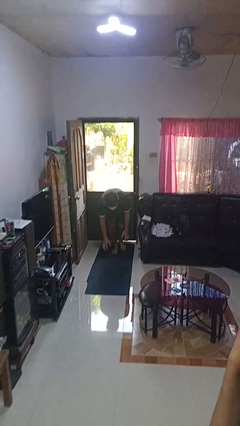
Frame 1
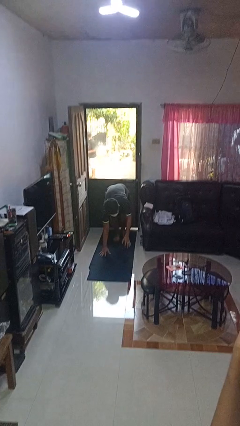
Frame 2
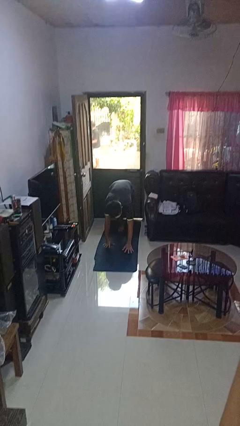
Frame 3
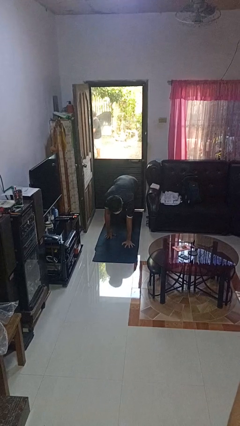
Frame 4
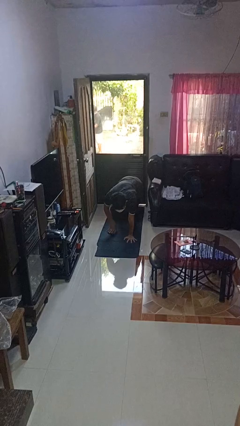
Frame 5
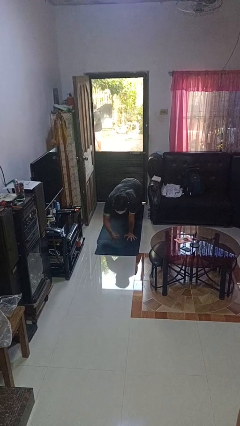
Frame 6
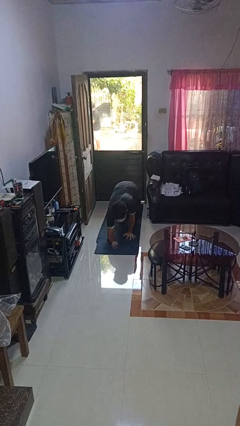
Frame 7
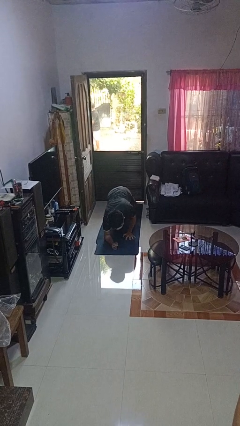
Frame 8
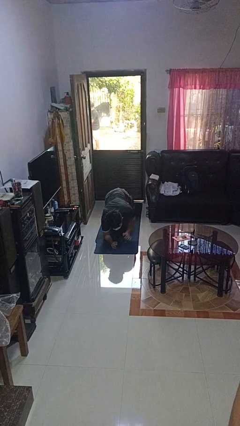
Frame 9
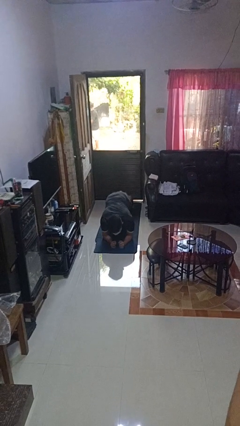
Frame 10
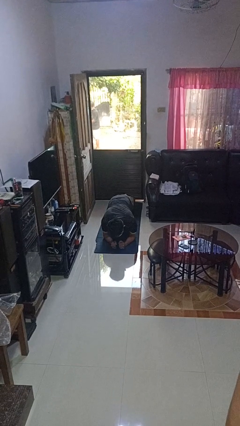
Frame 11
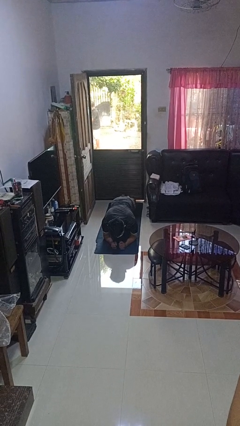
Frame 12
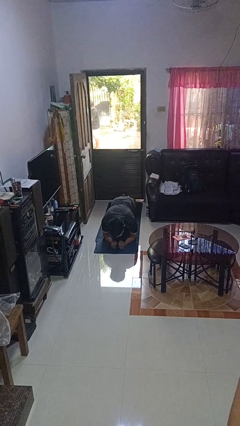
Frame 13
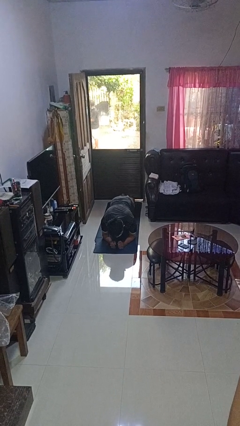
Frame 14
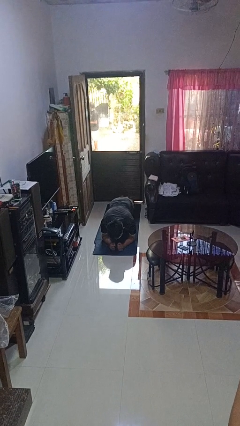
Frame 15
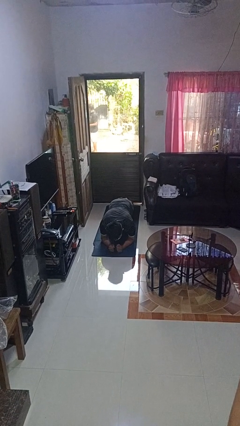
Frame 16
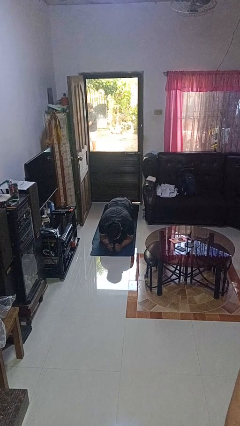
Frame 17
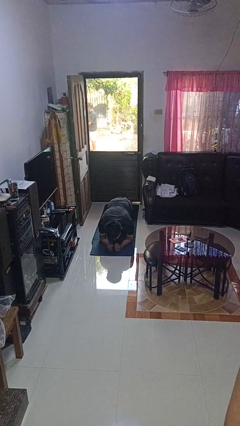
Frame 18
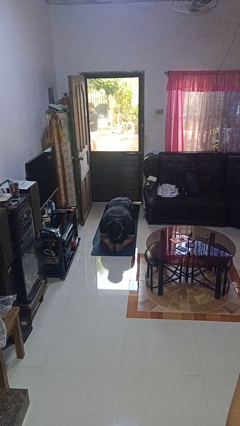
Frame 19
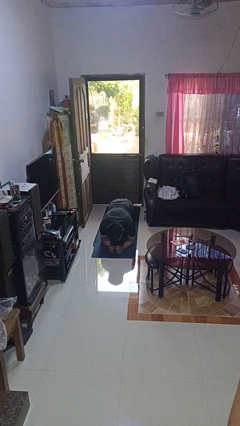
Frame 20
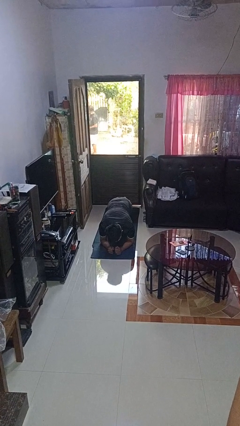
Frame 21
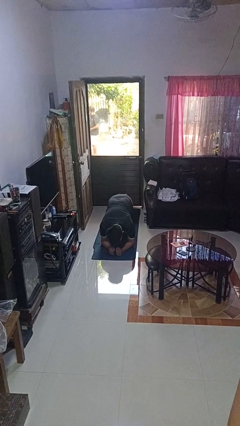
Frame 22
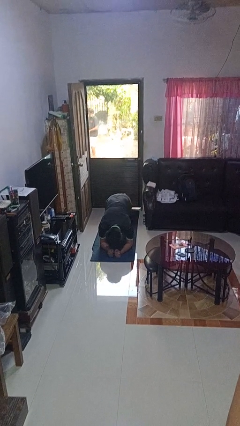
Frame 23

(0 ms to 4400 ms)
person exercises with plank

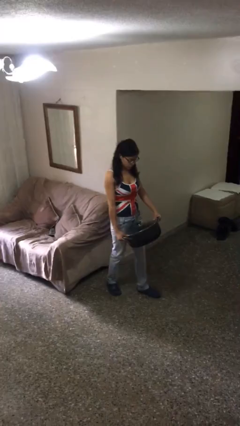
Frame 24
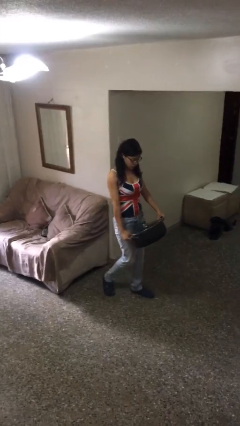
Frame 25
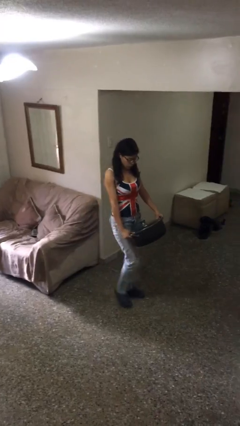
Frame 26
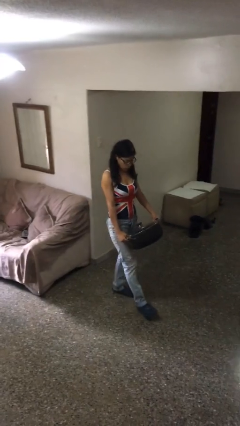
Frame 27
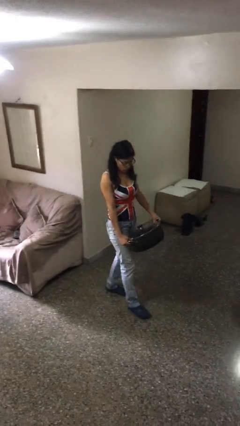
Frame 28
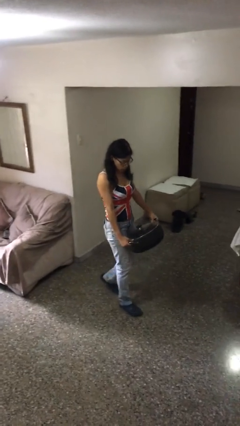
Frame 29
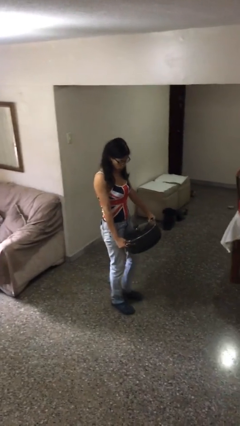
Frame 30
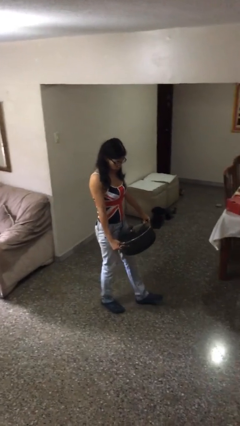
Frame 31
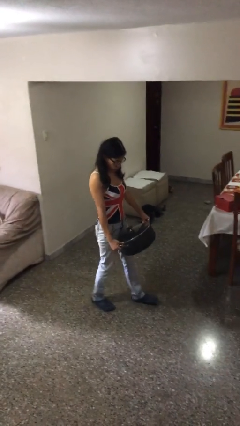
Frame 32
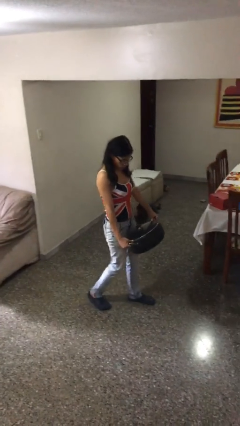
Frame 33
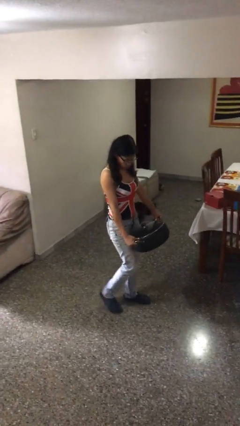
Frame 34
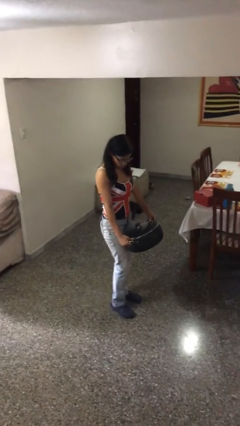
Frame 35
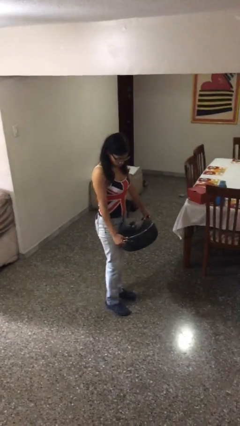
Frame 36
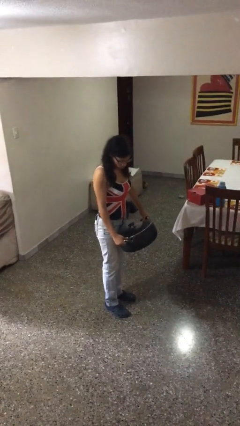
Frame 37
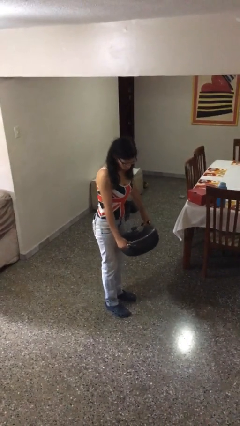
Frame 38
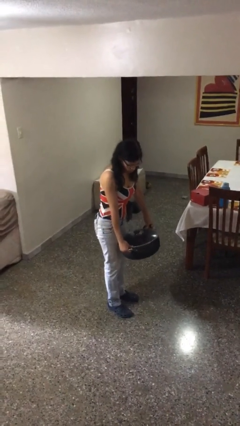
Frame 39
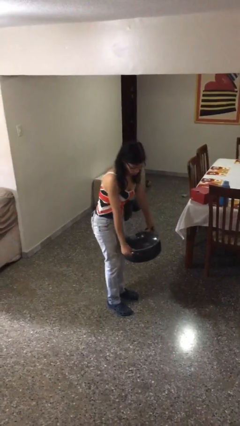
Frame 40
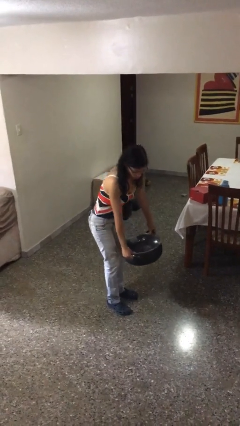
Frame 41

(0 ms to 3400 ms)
person carries heavy object

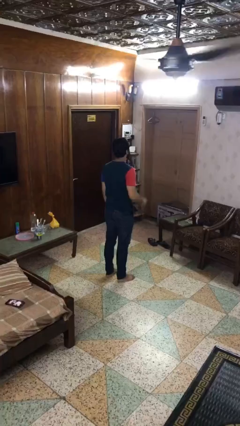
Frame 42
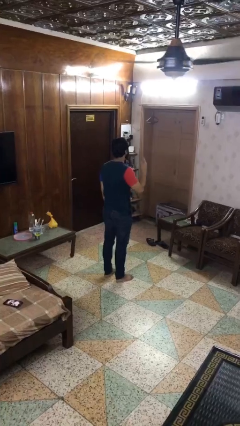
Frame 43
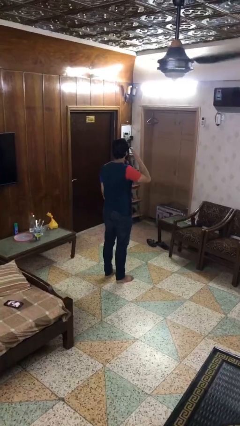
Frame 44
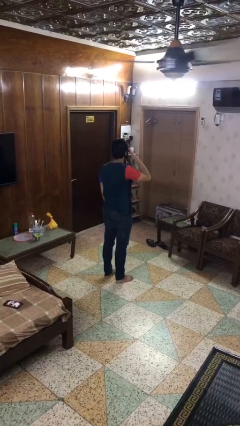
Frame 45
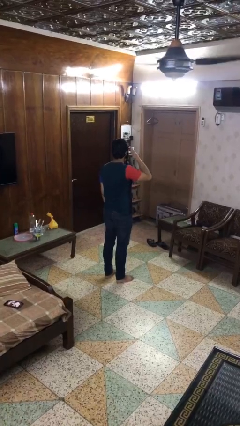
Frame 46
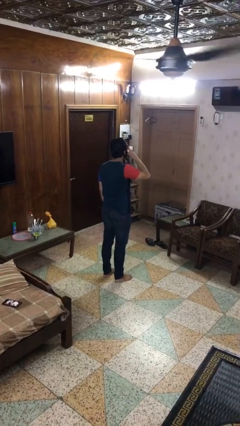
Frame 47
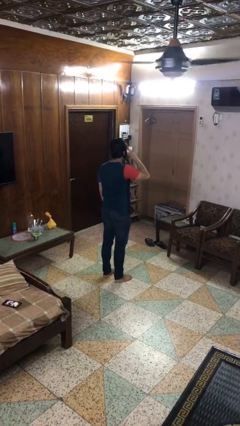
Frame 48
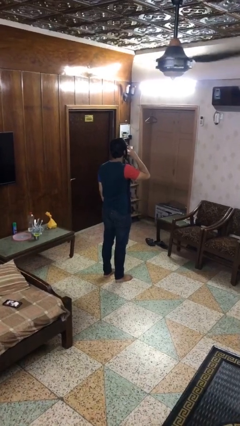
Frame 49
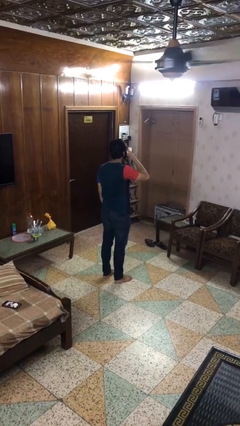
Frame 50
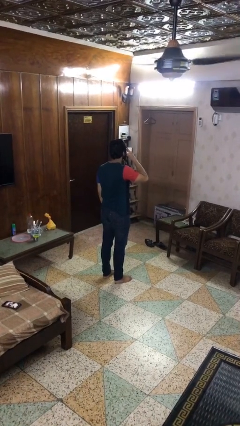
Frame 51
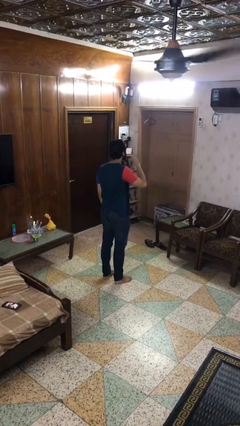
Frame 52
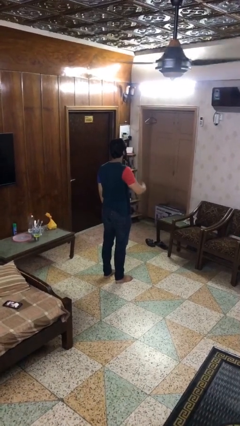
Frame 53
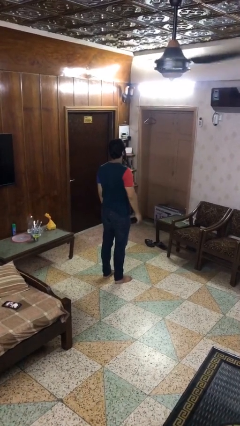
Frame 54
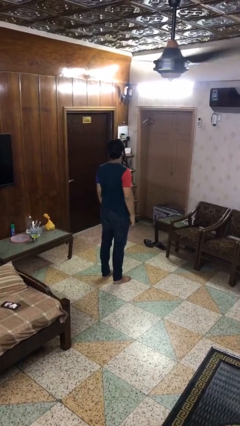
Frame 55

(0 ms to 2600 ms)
person rubs eyes

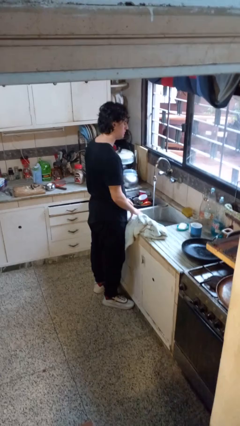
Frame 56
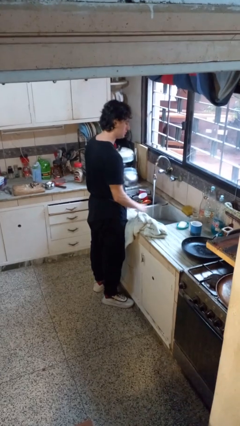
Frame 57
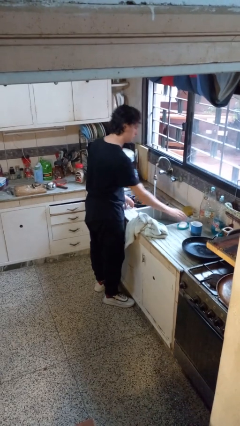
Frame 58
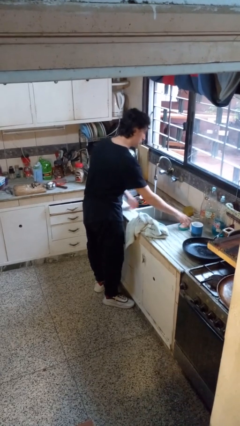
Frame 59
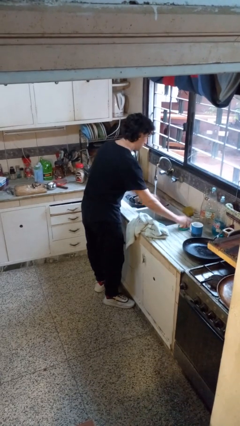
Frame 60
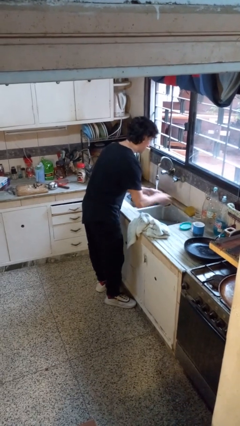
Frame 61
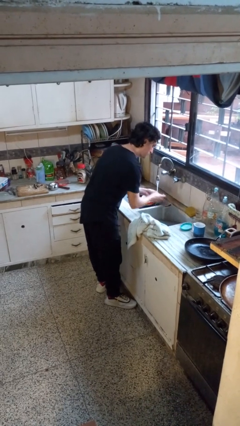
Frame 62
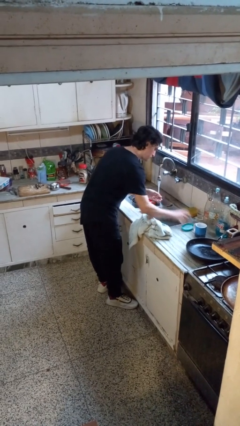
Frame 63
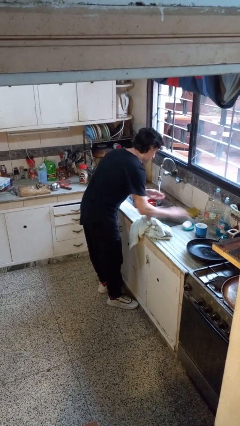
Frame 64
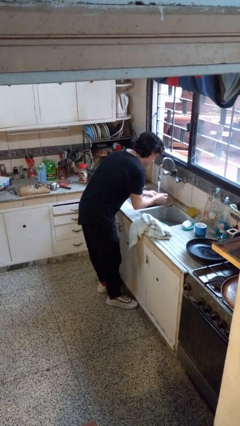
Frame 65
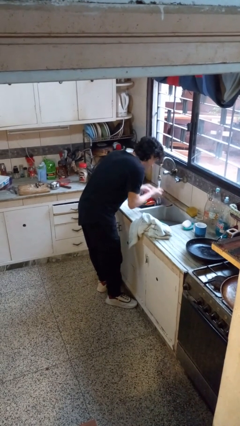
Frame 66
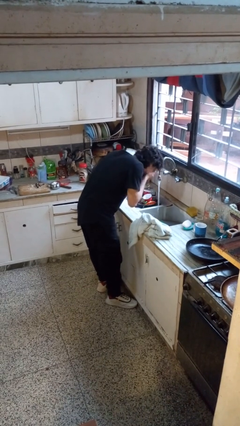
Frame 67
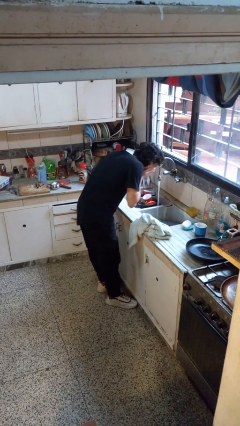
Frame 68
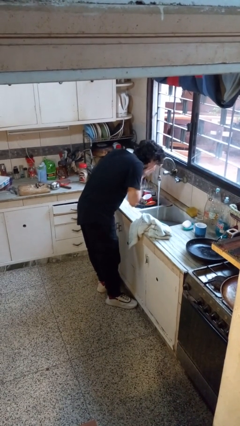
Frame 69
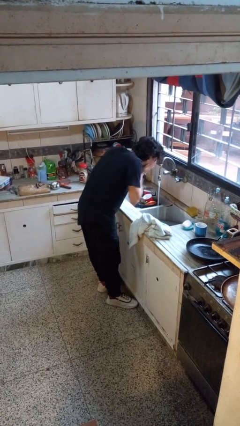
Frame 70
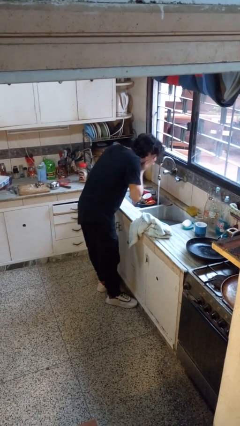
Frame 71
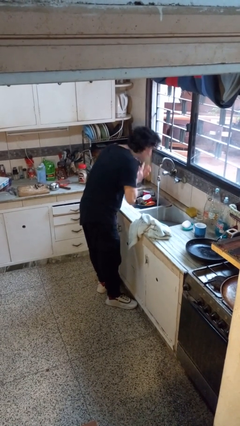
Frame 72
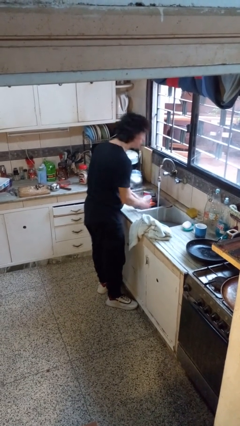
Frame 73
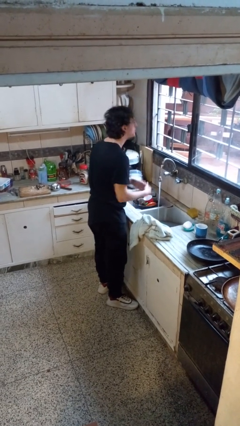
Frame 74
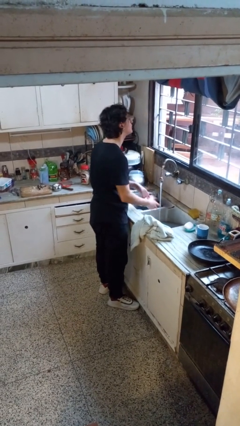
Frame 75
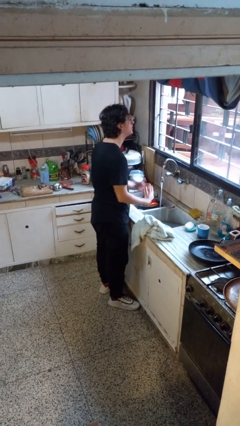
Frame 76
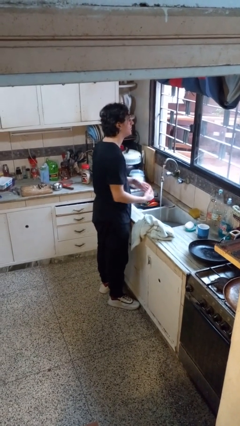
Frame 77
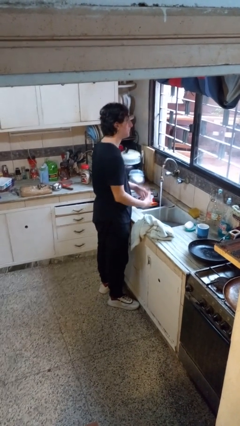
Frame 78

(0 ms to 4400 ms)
person washes face

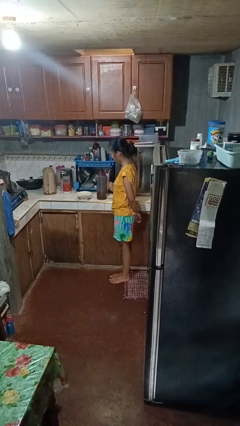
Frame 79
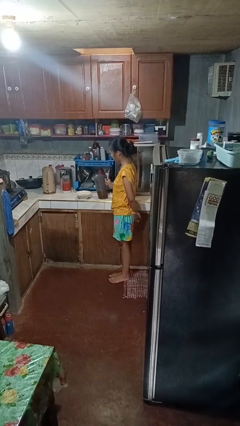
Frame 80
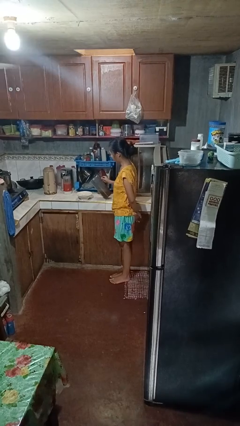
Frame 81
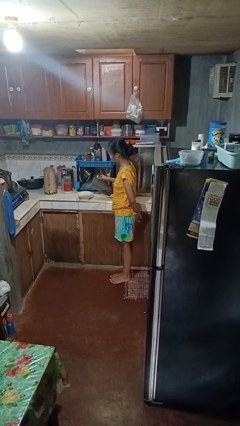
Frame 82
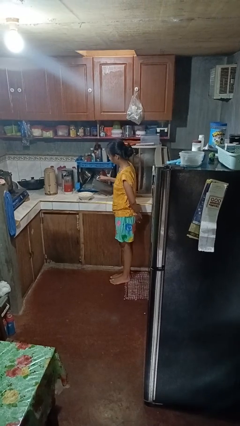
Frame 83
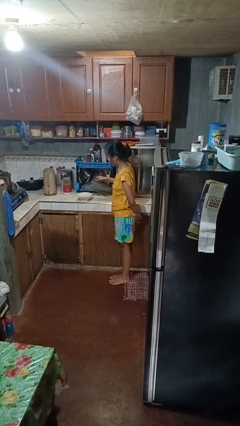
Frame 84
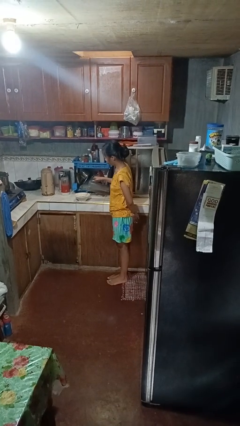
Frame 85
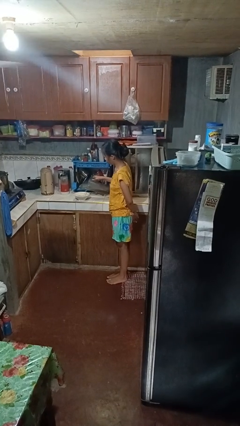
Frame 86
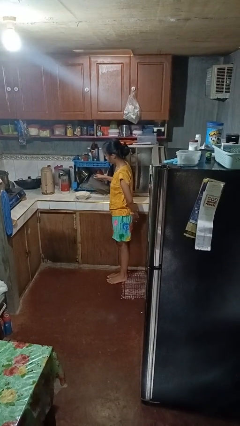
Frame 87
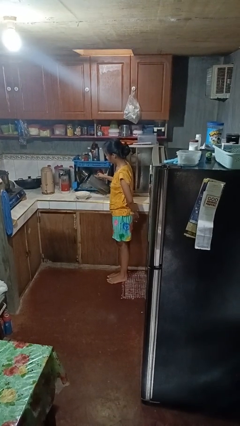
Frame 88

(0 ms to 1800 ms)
person pours into bowl

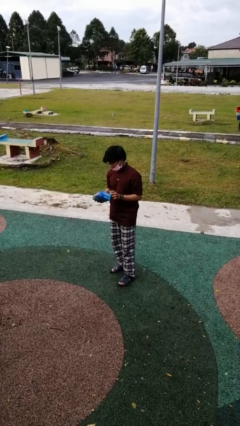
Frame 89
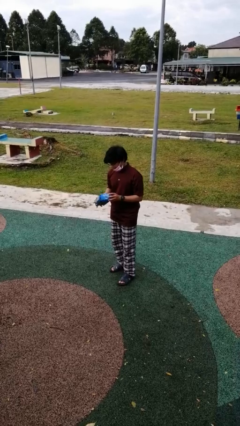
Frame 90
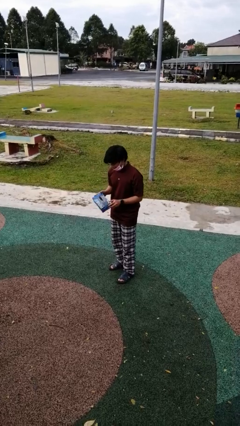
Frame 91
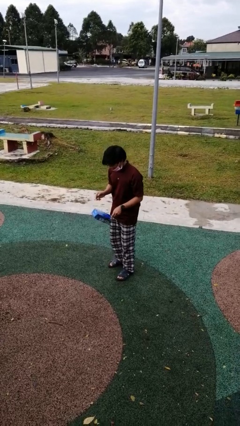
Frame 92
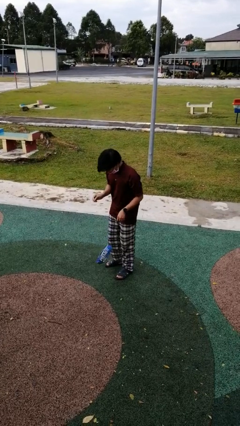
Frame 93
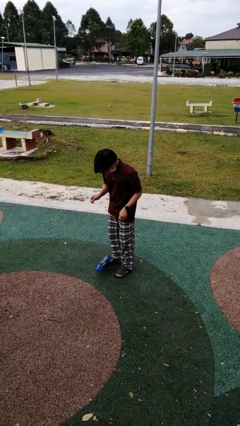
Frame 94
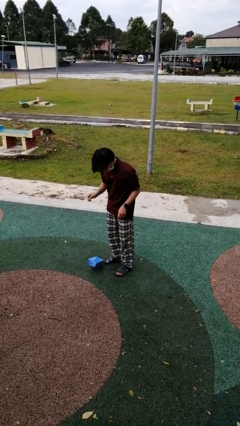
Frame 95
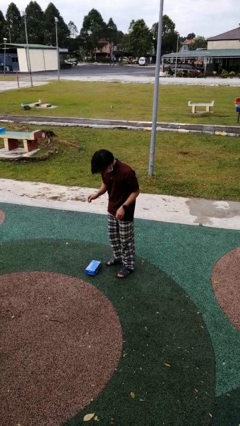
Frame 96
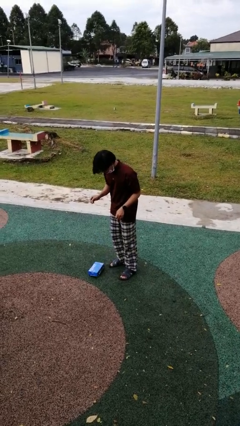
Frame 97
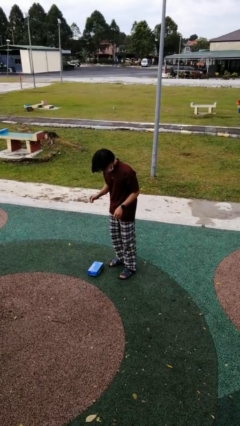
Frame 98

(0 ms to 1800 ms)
person drops object
